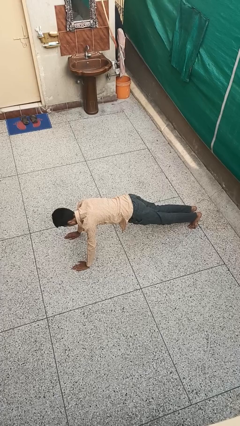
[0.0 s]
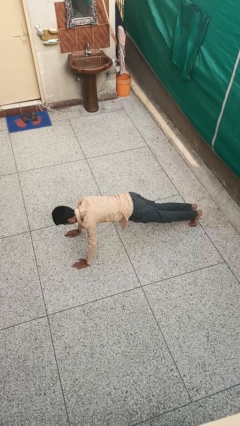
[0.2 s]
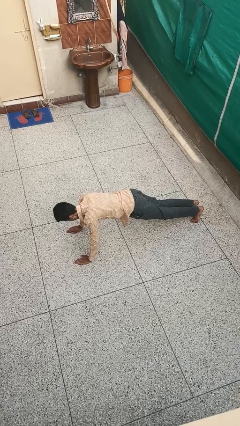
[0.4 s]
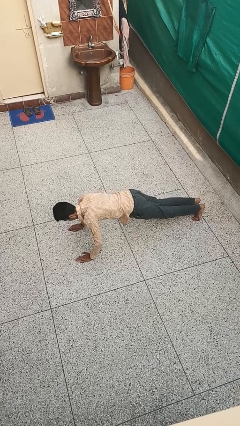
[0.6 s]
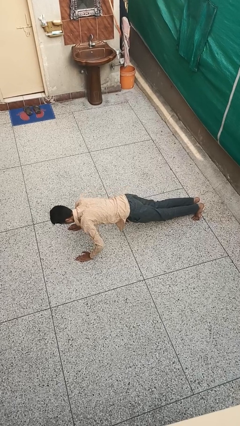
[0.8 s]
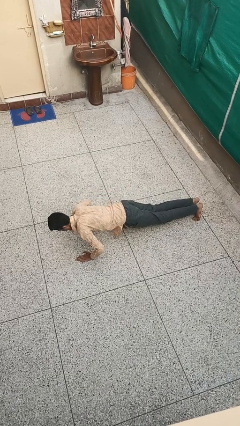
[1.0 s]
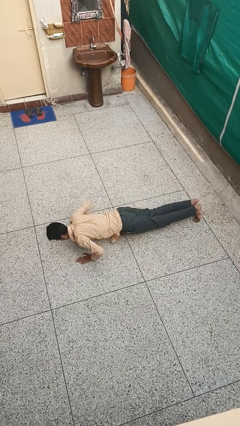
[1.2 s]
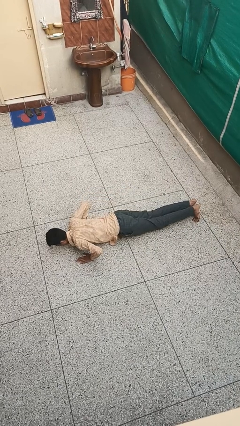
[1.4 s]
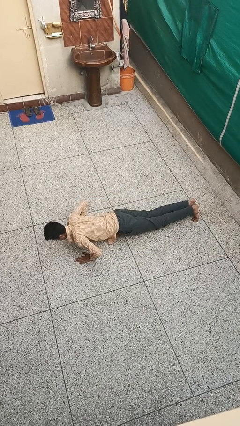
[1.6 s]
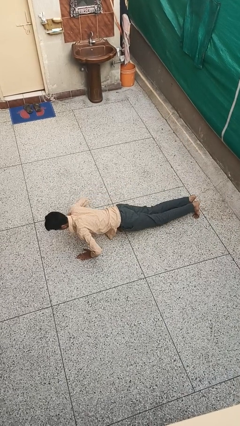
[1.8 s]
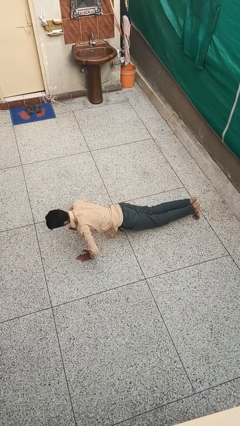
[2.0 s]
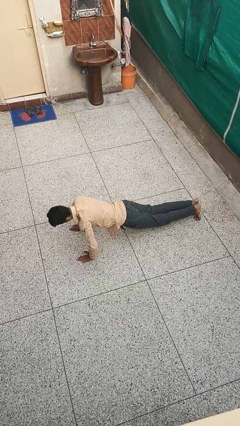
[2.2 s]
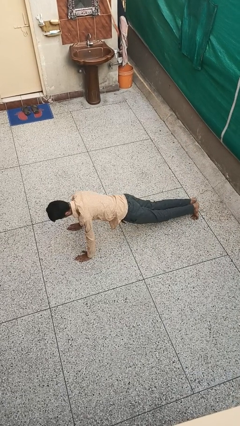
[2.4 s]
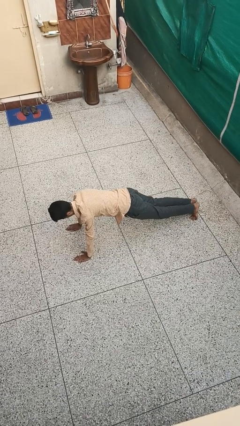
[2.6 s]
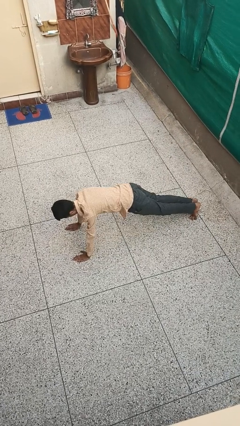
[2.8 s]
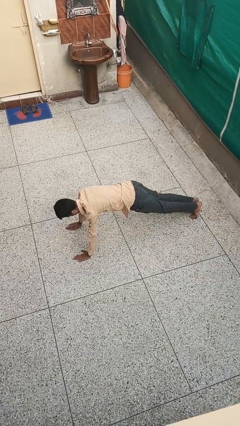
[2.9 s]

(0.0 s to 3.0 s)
person exercises with pushup

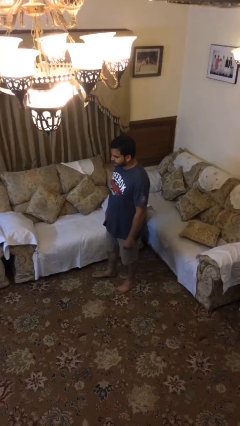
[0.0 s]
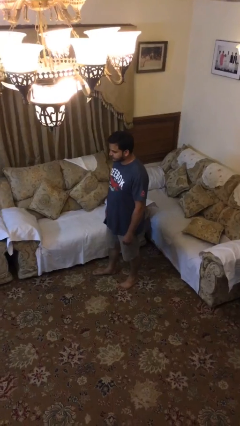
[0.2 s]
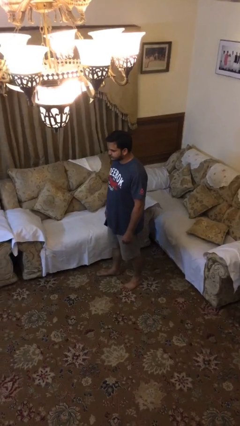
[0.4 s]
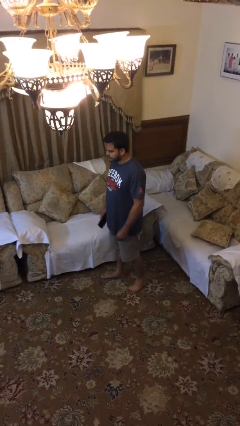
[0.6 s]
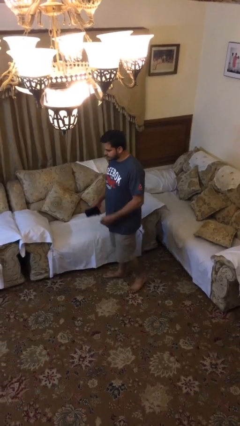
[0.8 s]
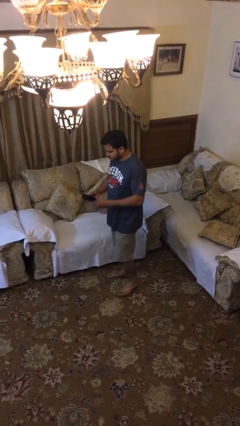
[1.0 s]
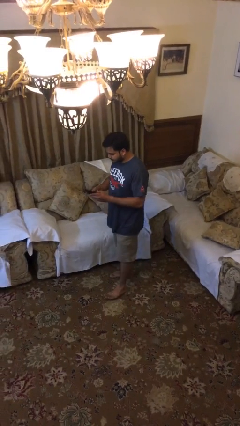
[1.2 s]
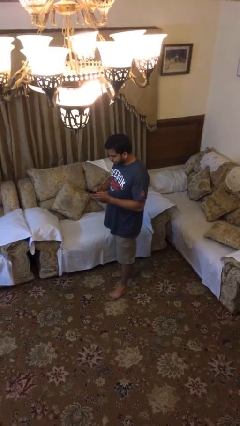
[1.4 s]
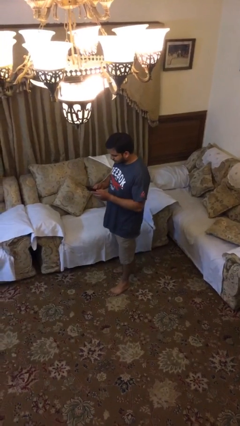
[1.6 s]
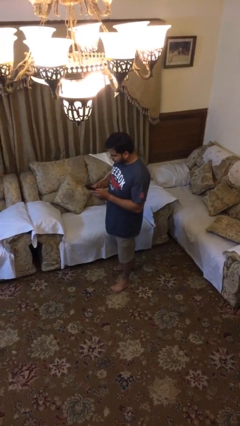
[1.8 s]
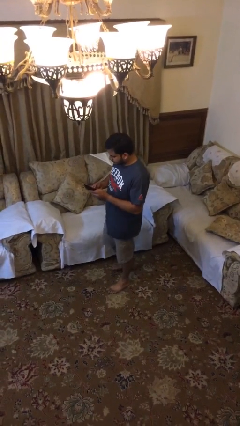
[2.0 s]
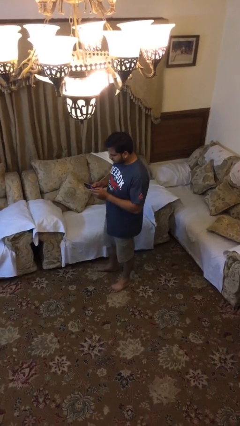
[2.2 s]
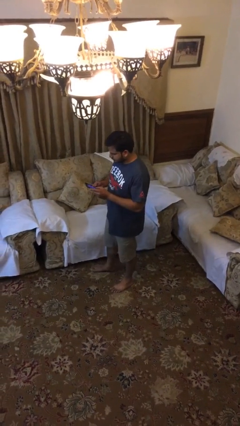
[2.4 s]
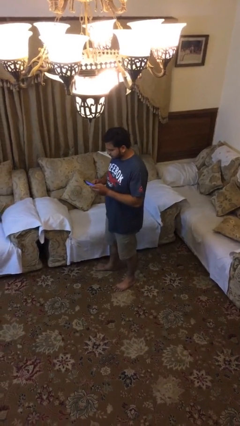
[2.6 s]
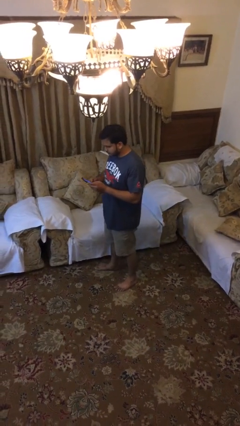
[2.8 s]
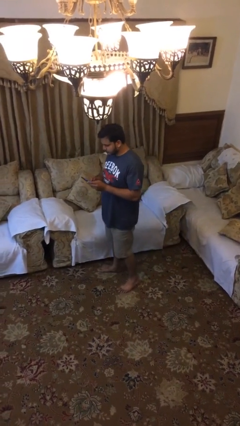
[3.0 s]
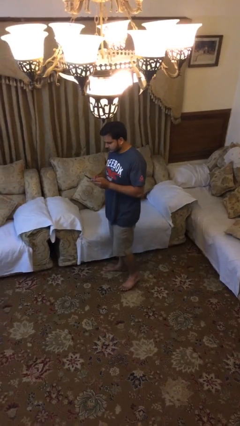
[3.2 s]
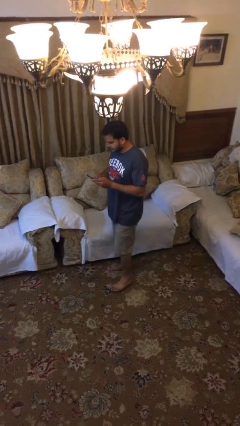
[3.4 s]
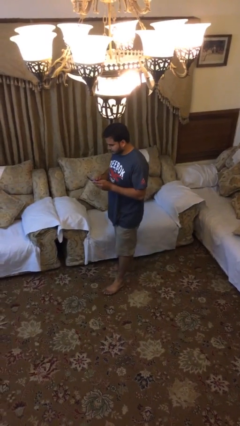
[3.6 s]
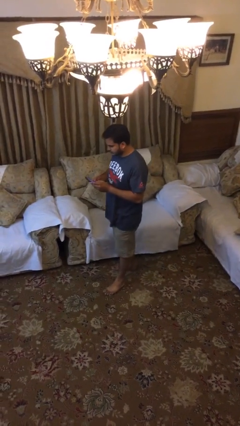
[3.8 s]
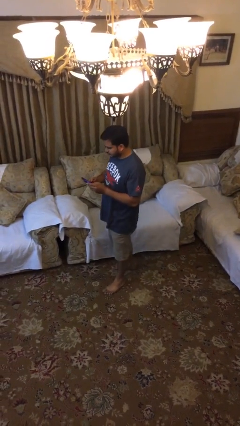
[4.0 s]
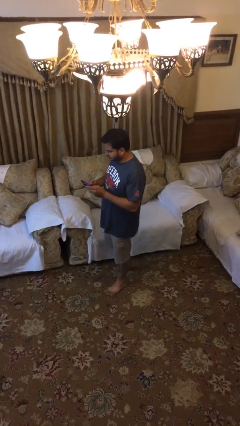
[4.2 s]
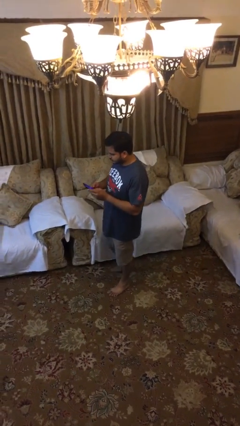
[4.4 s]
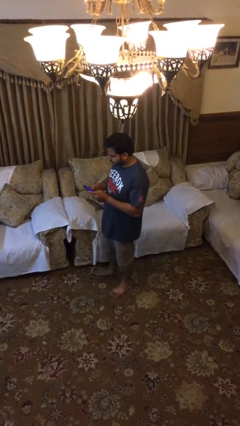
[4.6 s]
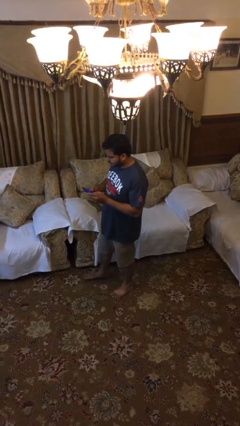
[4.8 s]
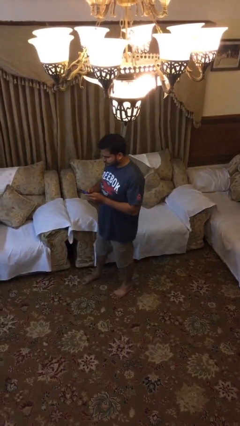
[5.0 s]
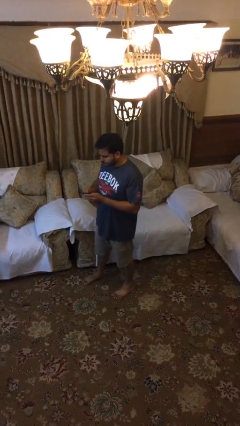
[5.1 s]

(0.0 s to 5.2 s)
person texts on phone

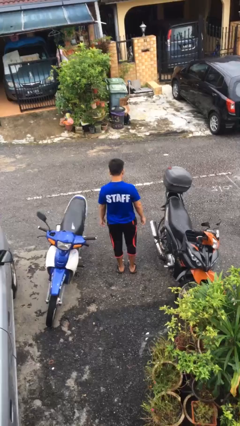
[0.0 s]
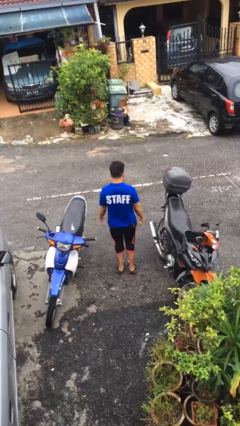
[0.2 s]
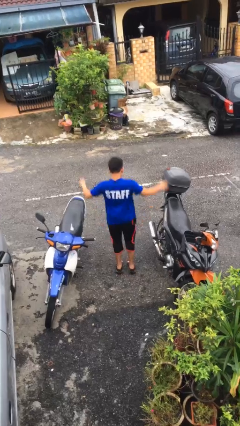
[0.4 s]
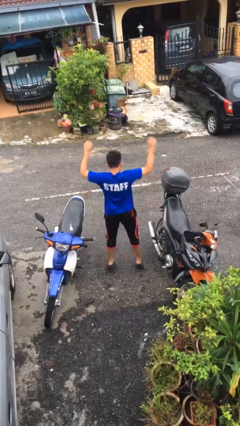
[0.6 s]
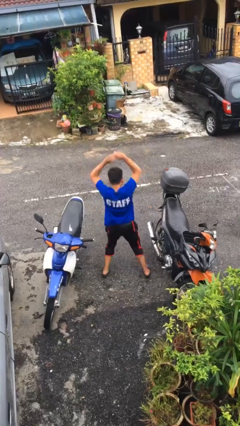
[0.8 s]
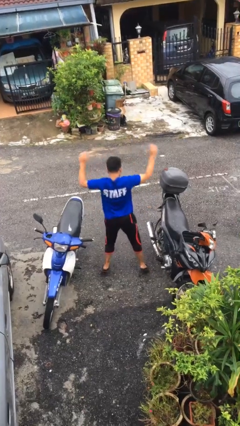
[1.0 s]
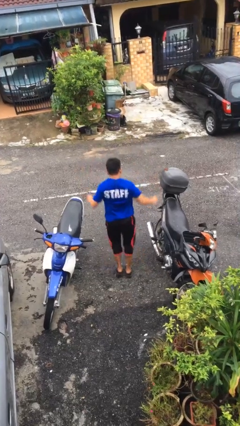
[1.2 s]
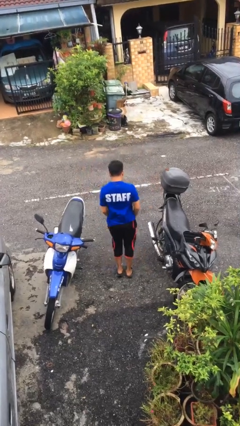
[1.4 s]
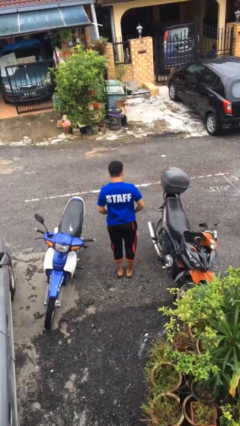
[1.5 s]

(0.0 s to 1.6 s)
person exercises with jumping jacks

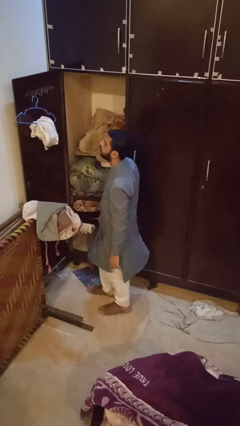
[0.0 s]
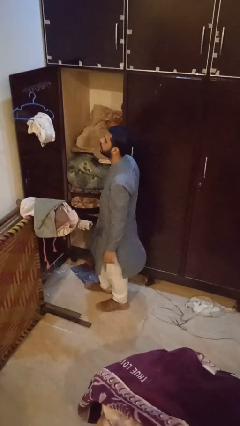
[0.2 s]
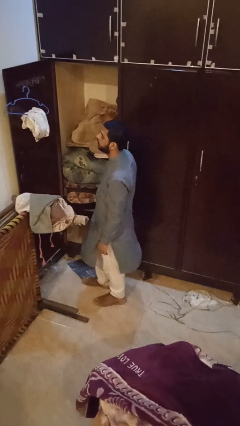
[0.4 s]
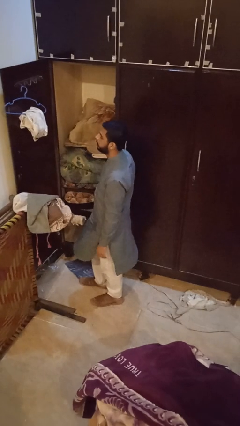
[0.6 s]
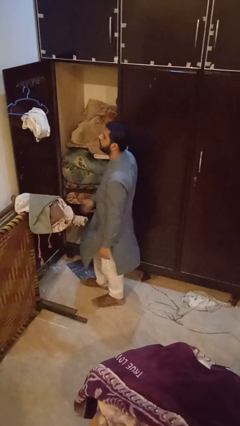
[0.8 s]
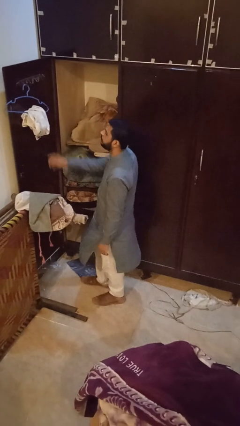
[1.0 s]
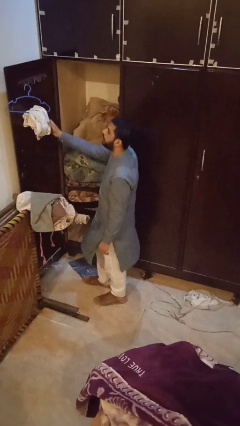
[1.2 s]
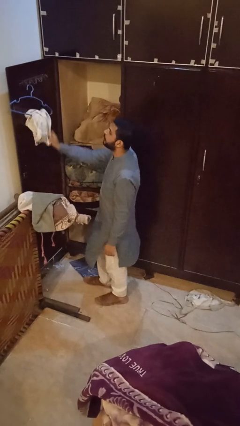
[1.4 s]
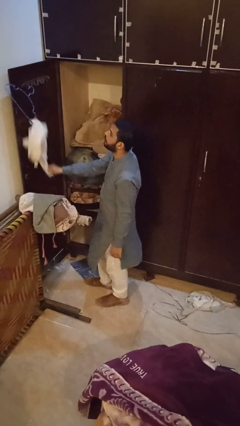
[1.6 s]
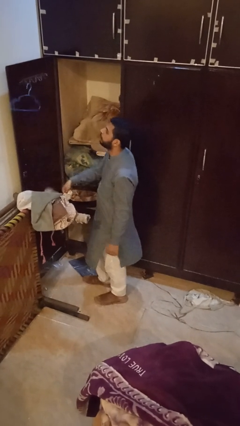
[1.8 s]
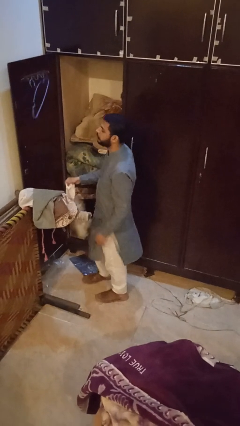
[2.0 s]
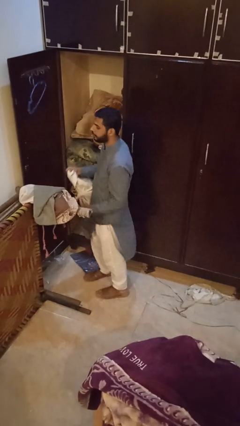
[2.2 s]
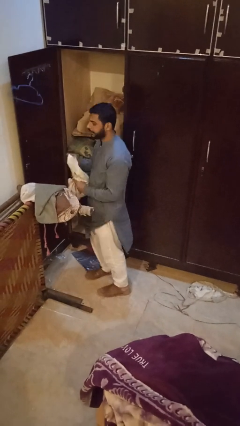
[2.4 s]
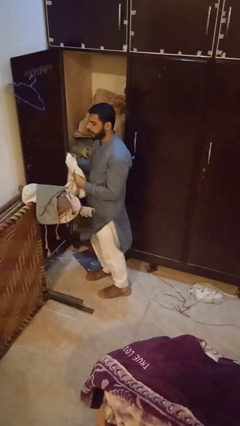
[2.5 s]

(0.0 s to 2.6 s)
person takes clothes from closet

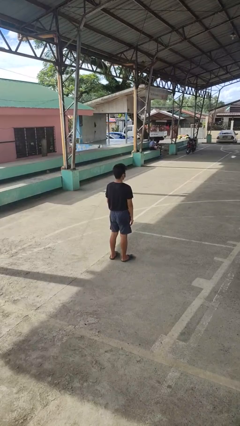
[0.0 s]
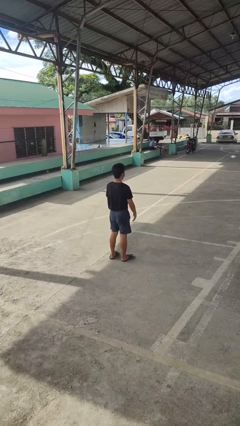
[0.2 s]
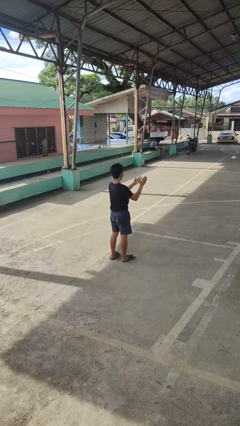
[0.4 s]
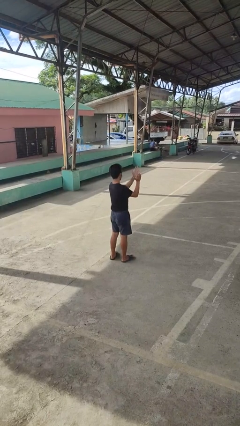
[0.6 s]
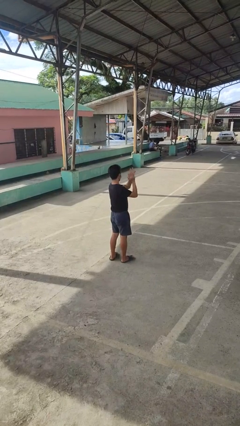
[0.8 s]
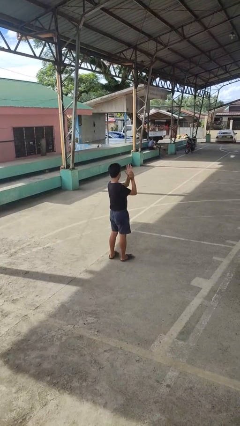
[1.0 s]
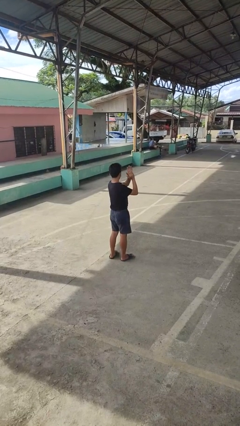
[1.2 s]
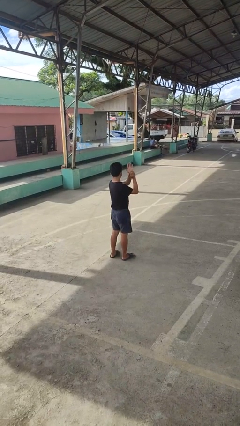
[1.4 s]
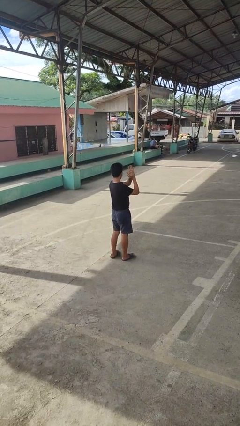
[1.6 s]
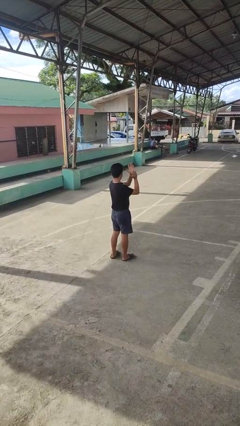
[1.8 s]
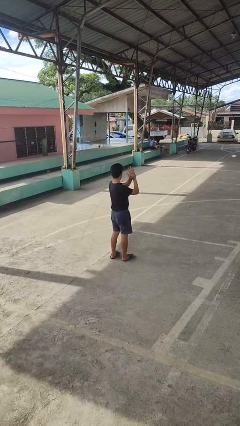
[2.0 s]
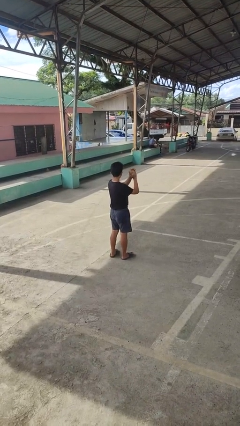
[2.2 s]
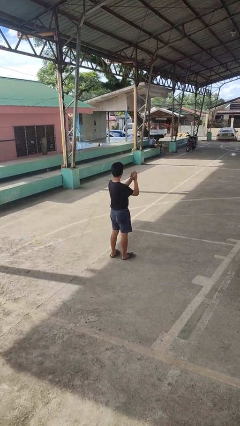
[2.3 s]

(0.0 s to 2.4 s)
person claps hands

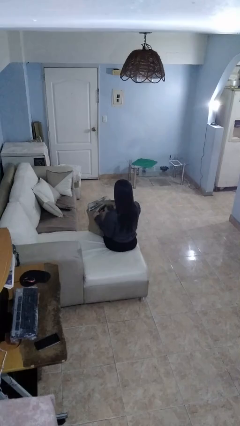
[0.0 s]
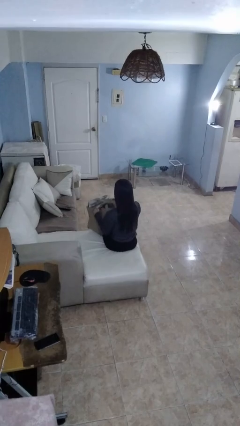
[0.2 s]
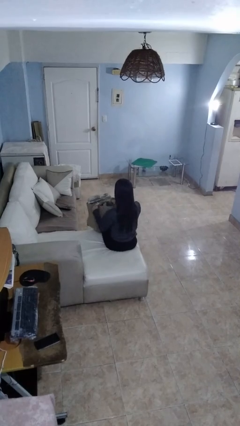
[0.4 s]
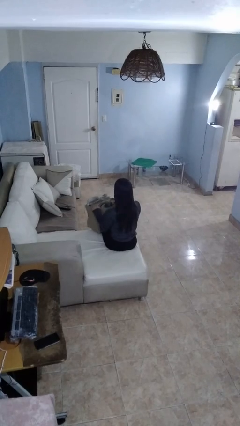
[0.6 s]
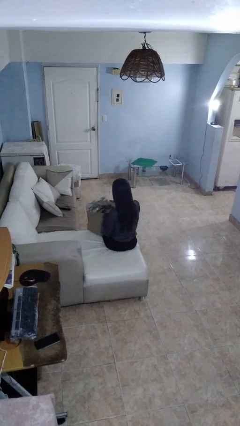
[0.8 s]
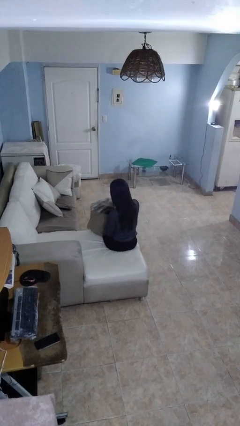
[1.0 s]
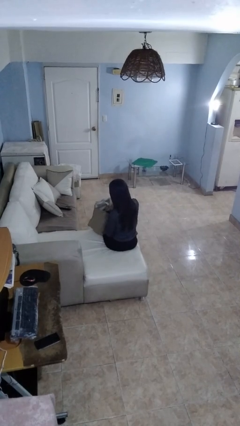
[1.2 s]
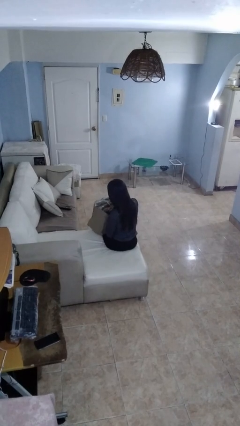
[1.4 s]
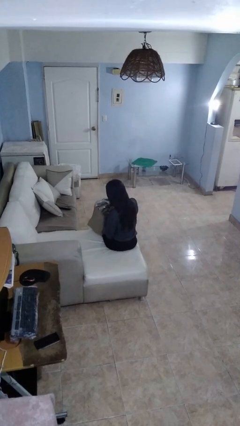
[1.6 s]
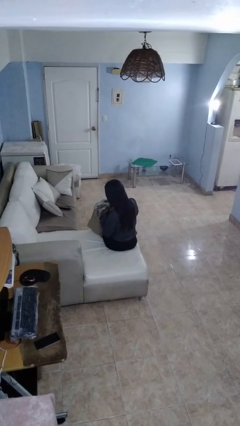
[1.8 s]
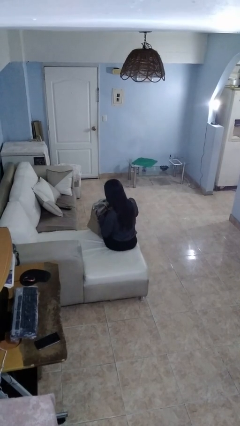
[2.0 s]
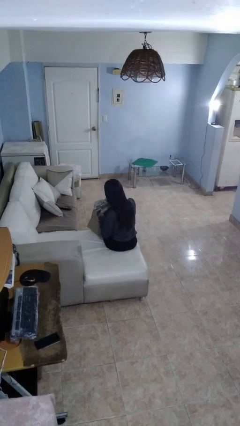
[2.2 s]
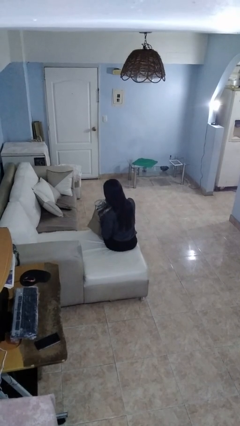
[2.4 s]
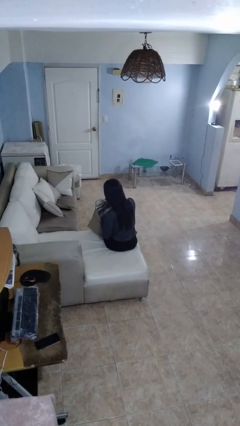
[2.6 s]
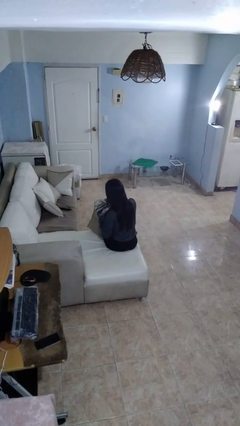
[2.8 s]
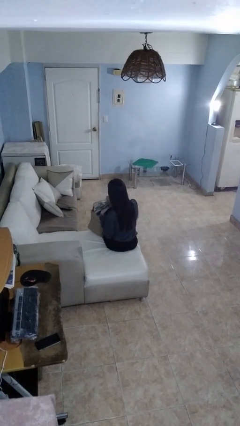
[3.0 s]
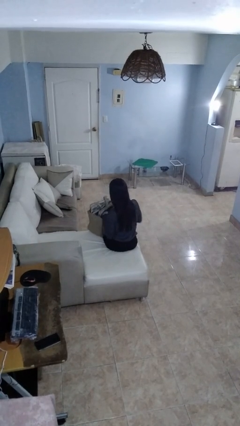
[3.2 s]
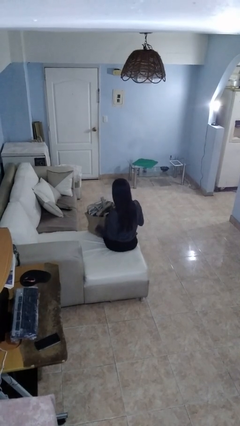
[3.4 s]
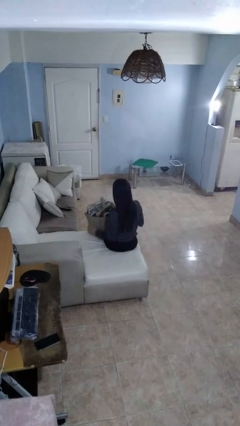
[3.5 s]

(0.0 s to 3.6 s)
person searches in bag
